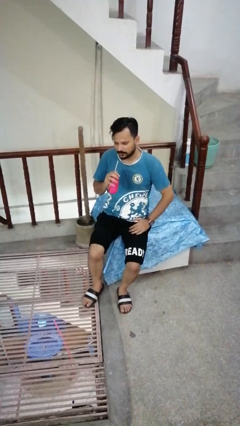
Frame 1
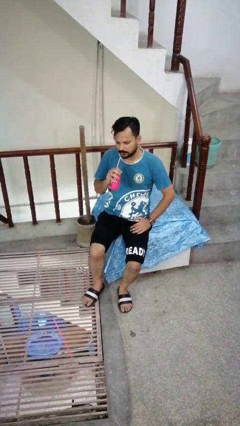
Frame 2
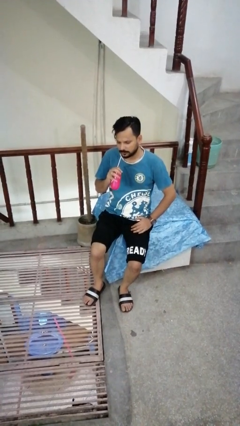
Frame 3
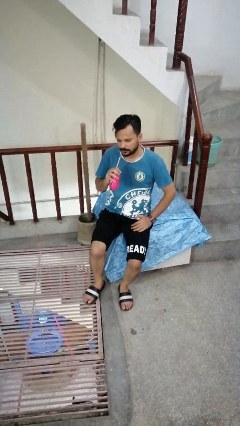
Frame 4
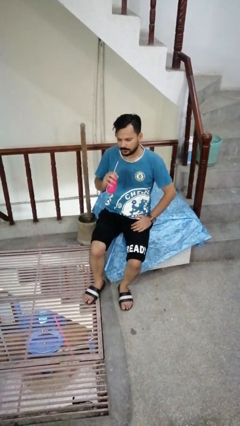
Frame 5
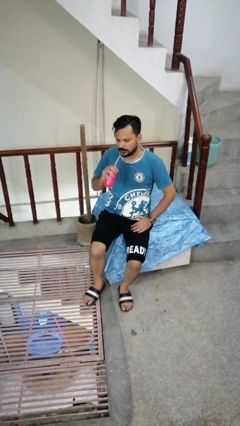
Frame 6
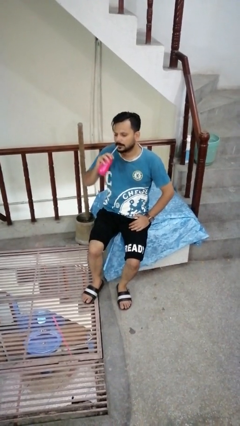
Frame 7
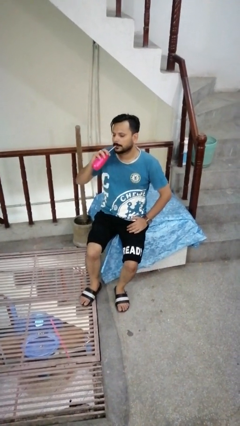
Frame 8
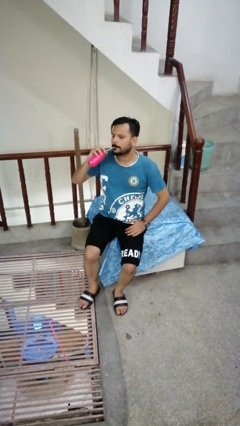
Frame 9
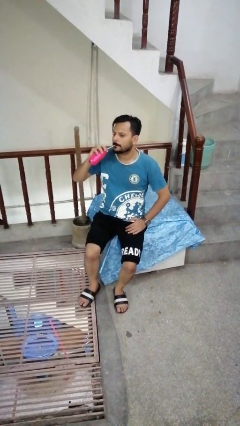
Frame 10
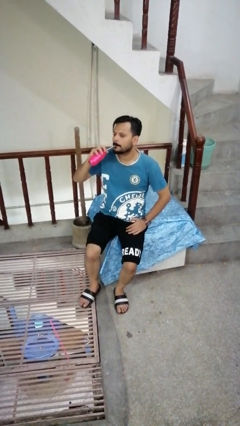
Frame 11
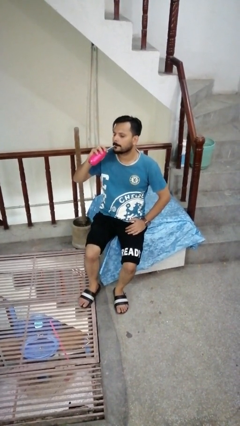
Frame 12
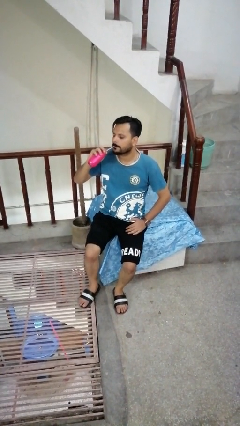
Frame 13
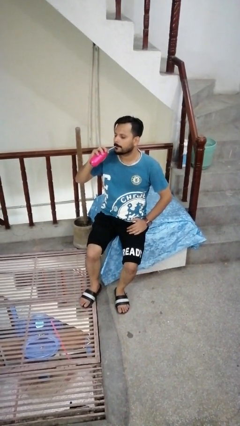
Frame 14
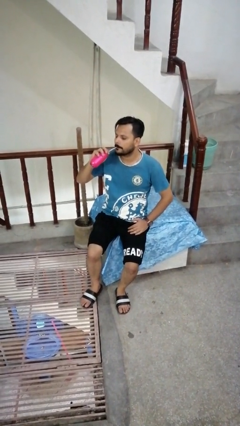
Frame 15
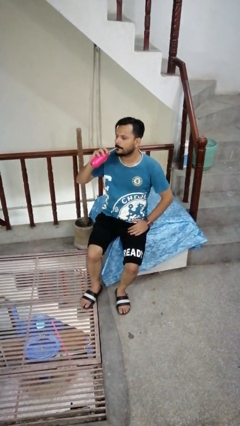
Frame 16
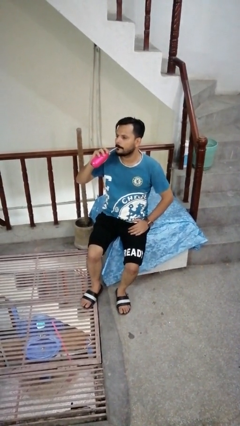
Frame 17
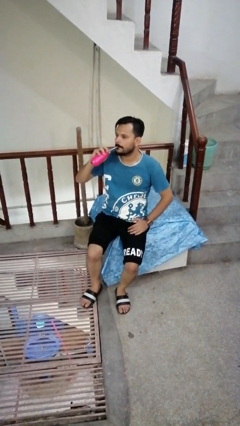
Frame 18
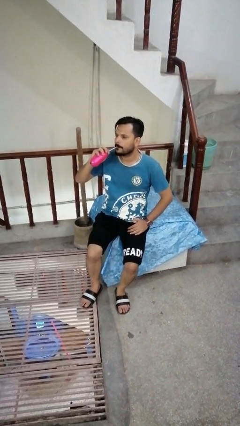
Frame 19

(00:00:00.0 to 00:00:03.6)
person drinks from straw

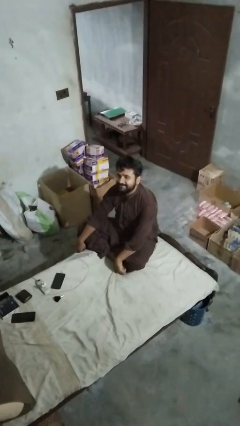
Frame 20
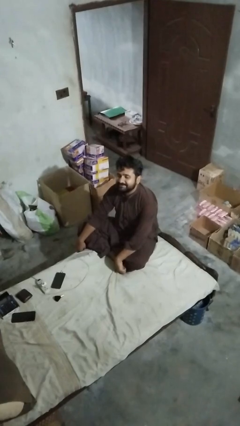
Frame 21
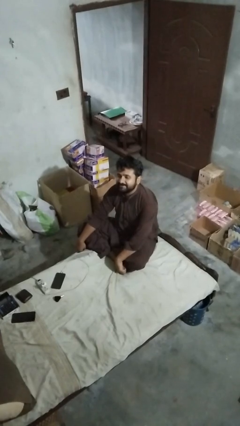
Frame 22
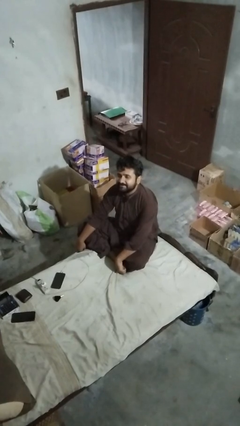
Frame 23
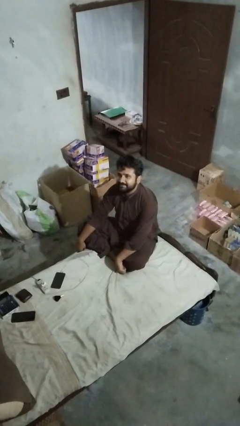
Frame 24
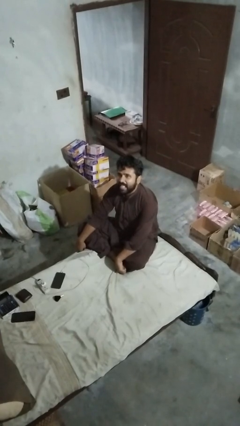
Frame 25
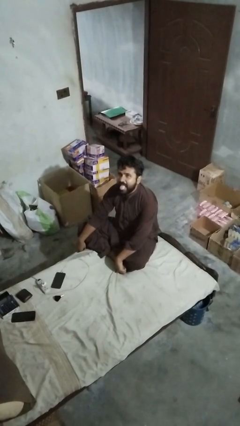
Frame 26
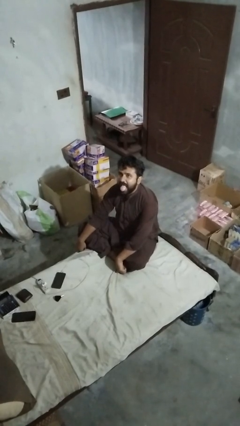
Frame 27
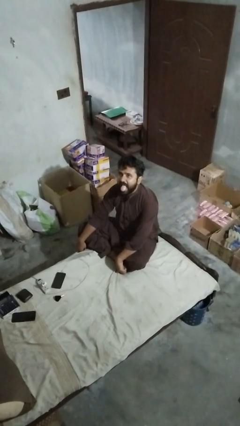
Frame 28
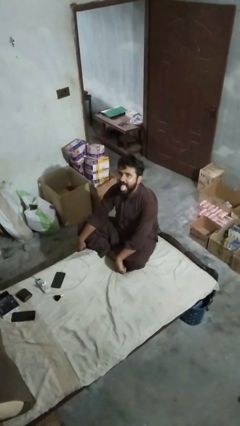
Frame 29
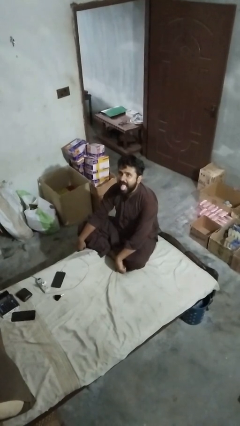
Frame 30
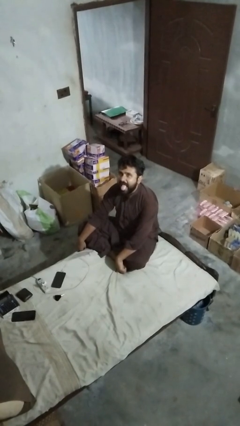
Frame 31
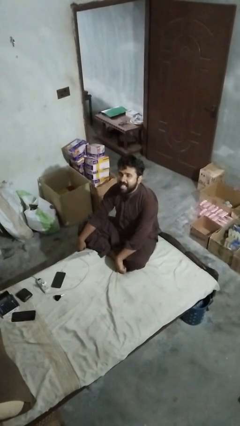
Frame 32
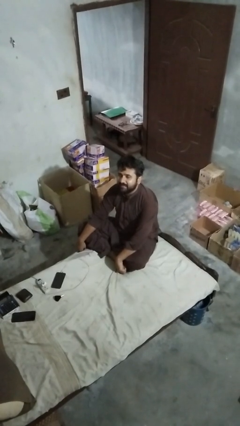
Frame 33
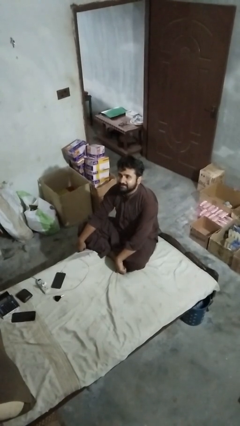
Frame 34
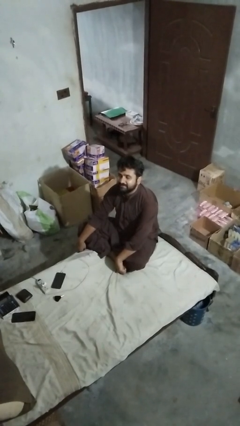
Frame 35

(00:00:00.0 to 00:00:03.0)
person sticks out tongue

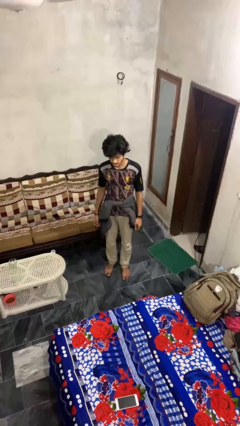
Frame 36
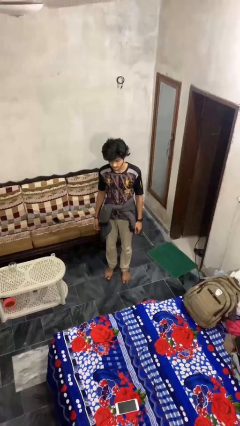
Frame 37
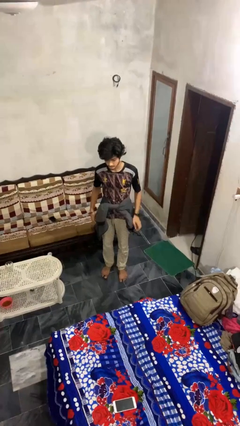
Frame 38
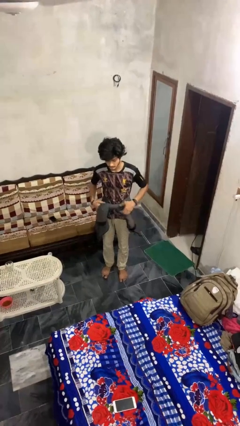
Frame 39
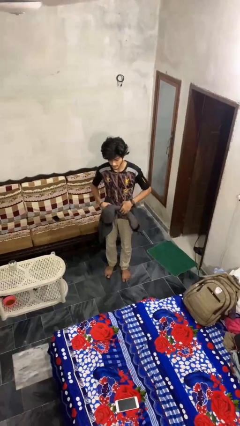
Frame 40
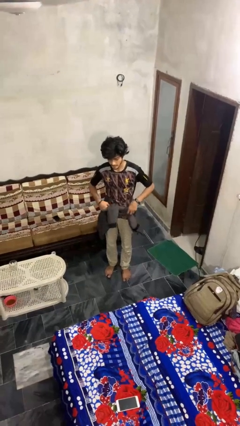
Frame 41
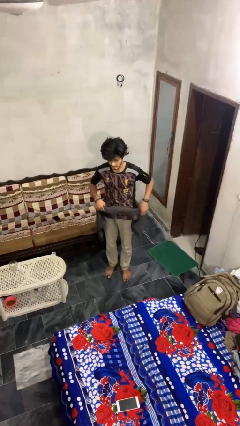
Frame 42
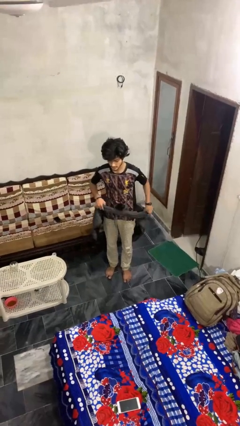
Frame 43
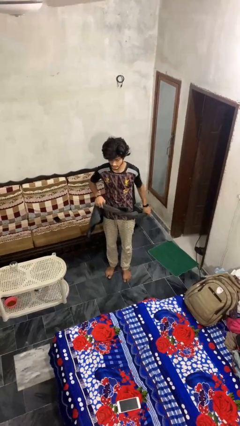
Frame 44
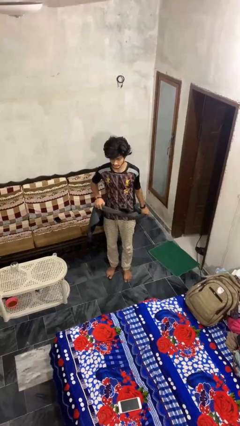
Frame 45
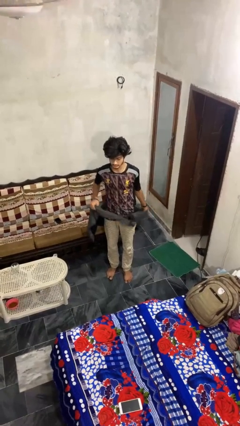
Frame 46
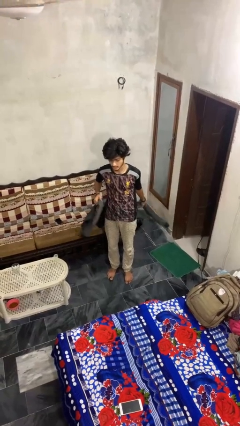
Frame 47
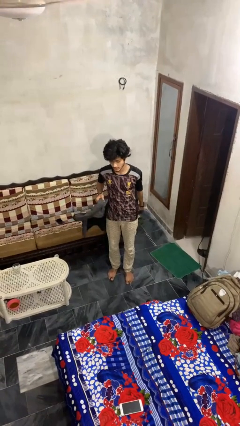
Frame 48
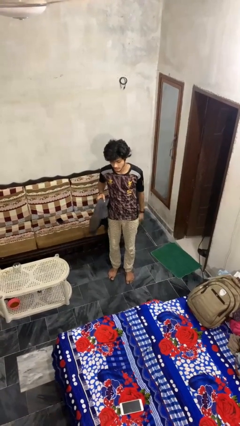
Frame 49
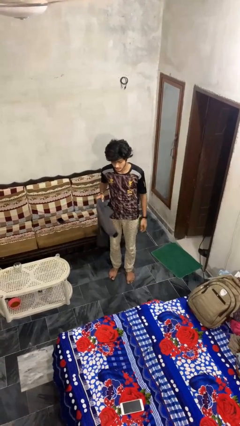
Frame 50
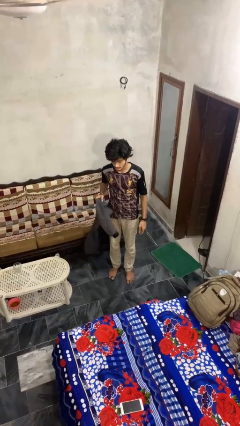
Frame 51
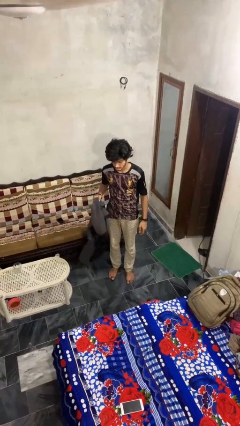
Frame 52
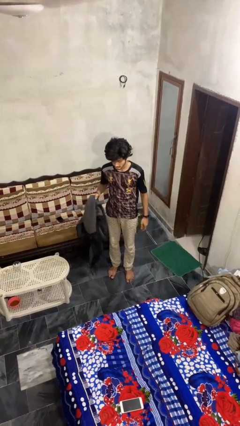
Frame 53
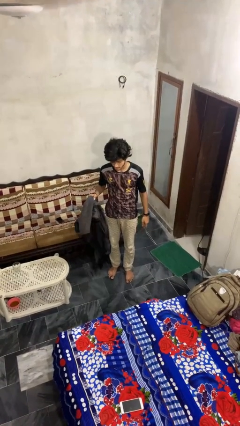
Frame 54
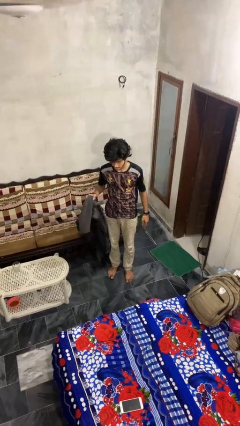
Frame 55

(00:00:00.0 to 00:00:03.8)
person unties jacket around waist

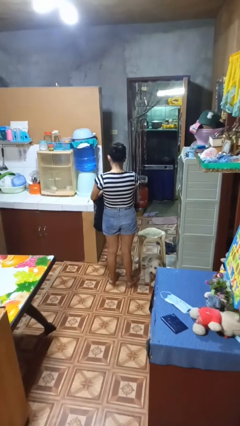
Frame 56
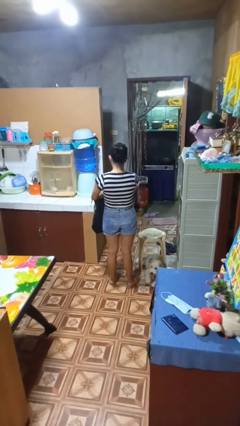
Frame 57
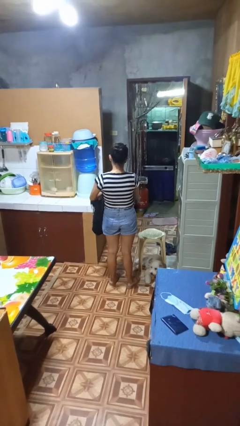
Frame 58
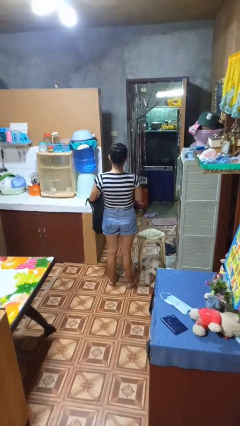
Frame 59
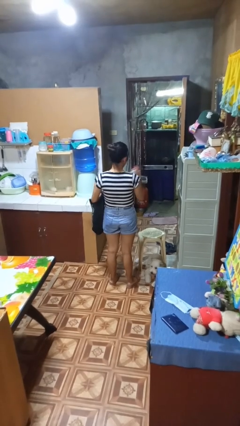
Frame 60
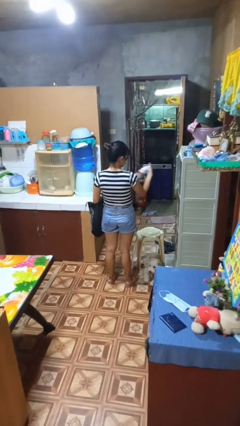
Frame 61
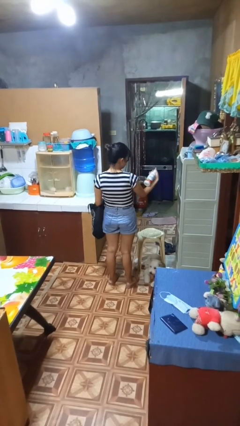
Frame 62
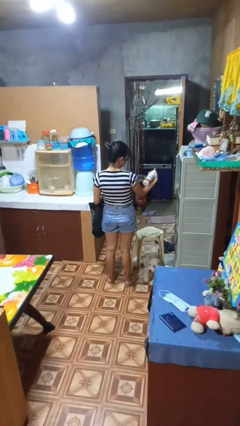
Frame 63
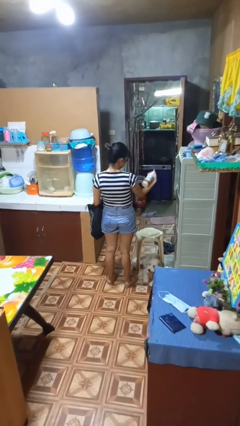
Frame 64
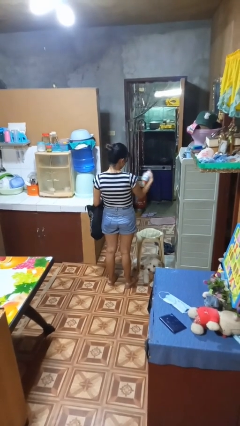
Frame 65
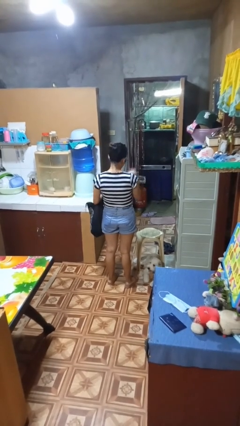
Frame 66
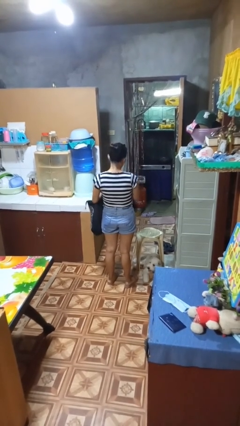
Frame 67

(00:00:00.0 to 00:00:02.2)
person takes object from bag

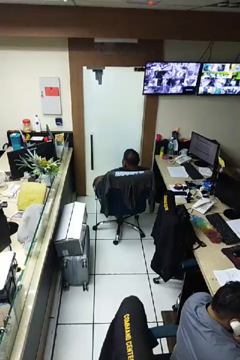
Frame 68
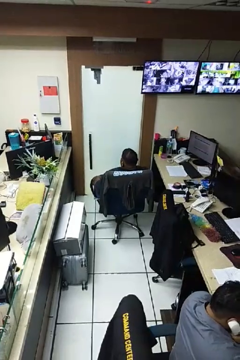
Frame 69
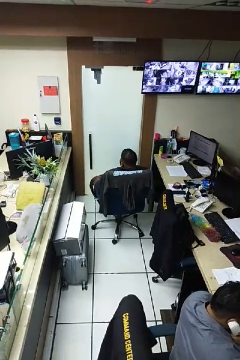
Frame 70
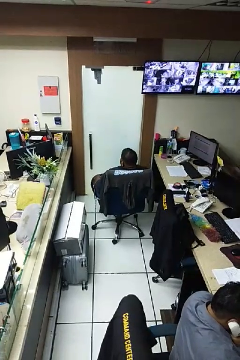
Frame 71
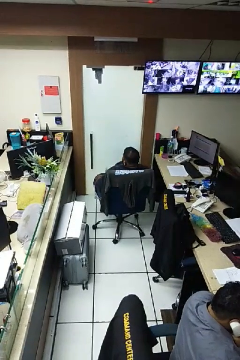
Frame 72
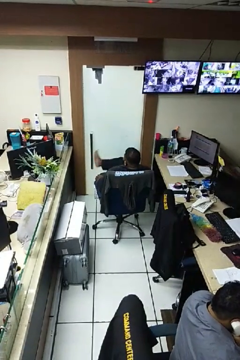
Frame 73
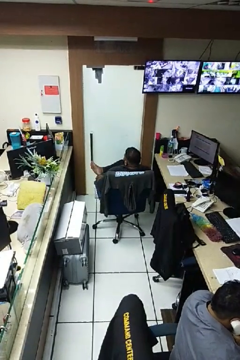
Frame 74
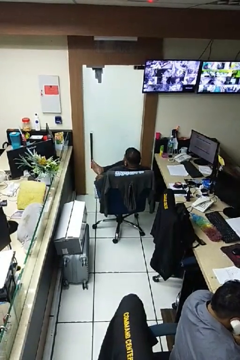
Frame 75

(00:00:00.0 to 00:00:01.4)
person crosses legs

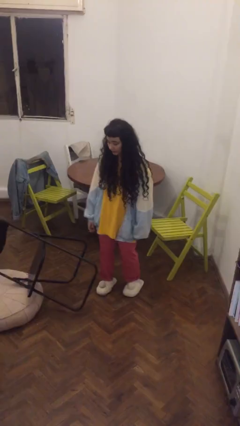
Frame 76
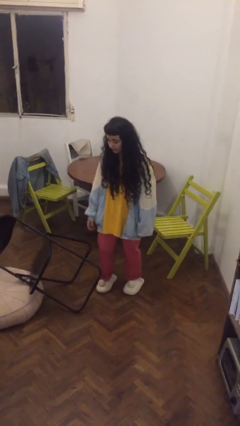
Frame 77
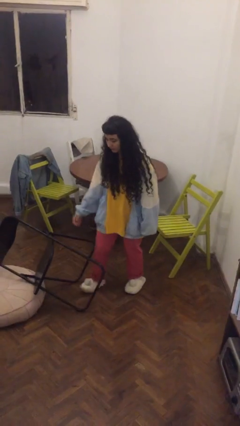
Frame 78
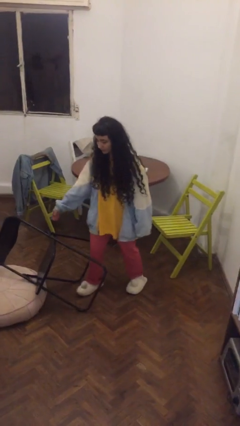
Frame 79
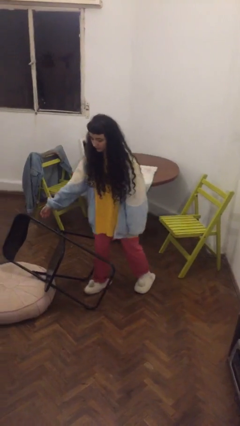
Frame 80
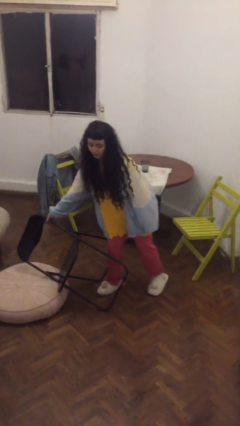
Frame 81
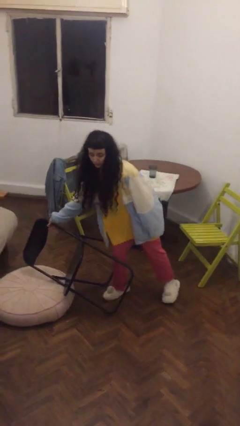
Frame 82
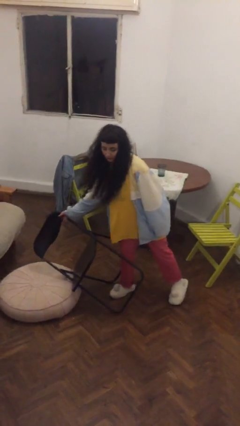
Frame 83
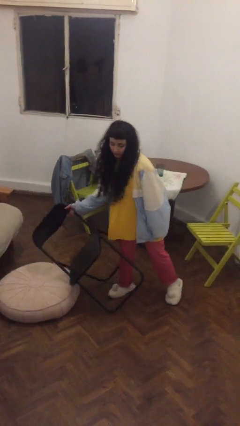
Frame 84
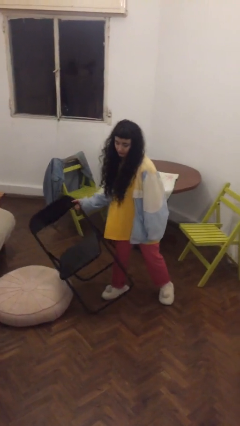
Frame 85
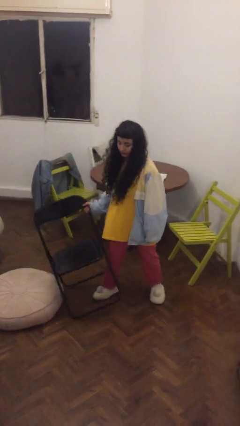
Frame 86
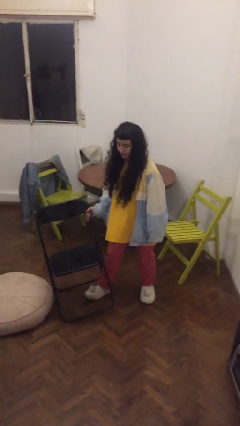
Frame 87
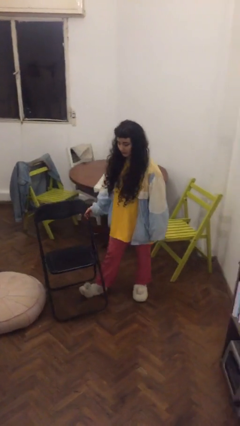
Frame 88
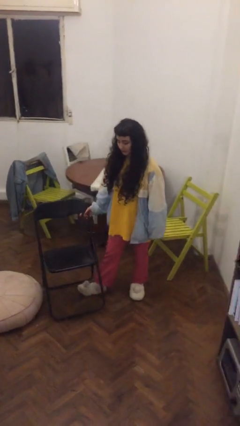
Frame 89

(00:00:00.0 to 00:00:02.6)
person sets upright furniture

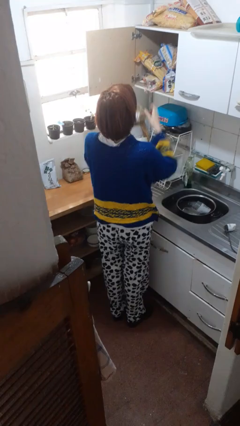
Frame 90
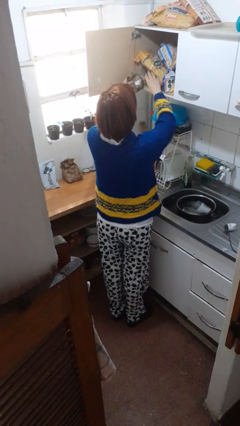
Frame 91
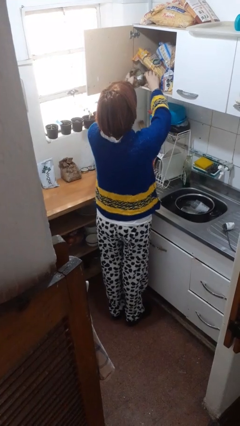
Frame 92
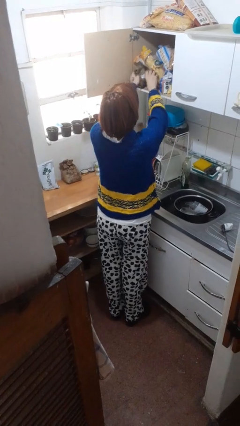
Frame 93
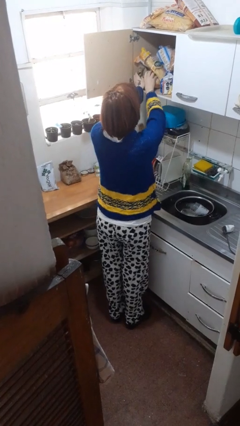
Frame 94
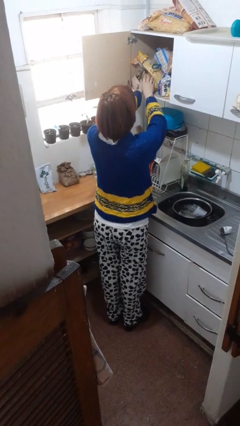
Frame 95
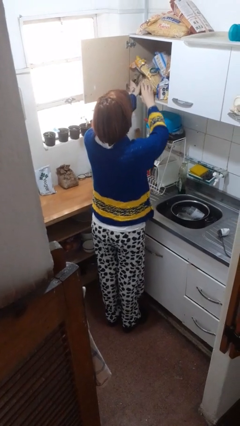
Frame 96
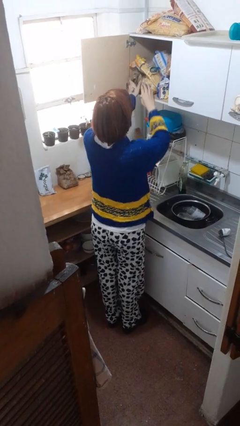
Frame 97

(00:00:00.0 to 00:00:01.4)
person puts object in cabinet
